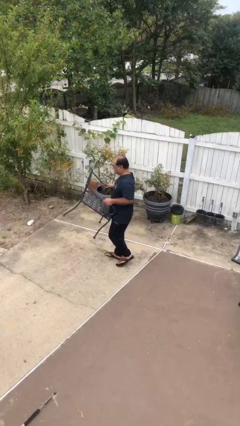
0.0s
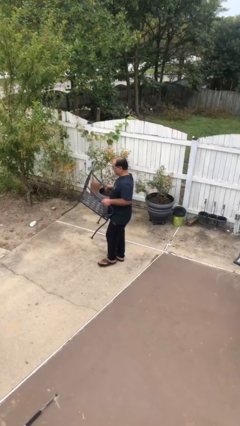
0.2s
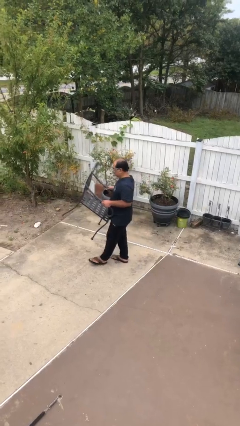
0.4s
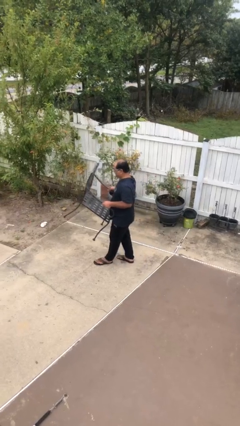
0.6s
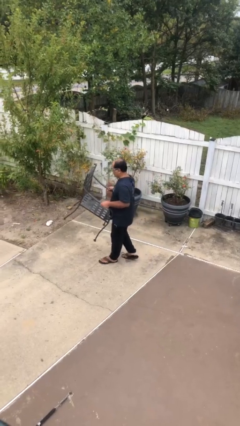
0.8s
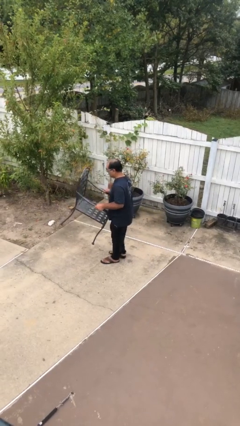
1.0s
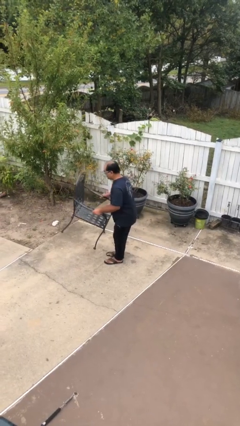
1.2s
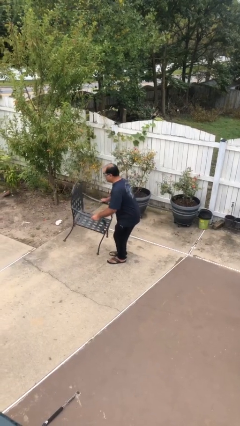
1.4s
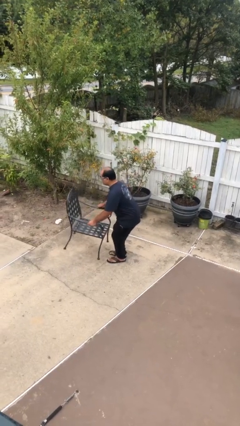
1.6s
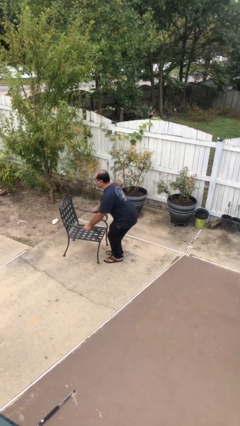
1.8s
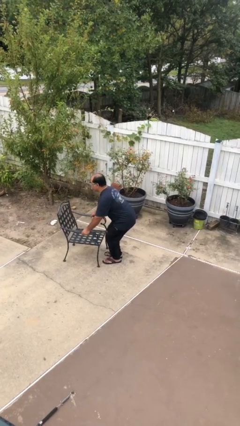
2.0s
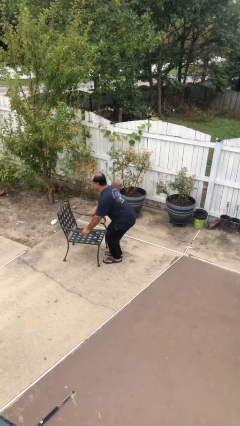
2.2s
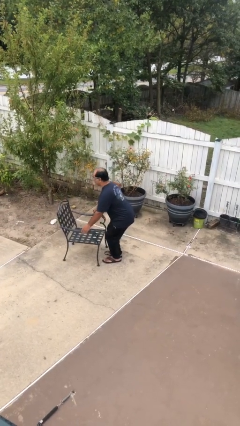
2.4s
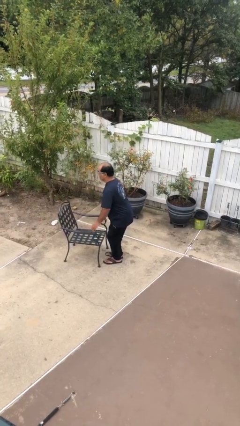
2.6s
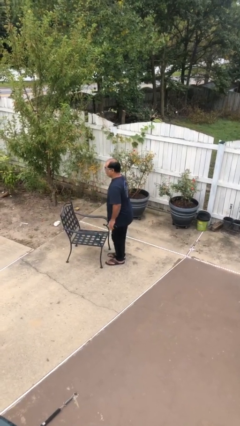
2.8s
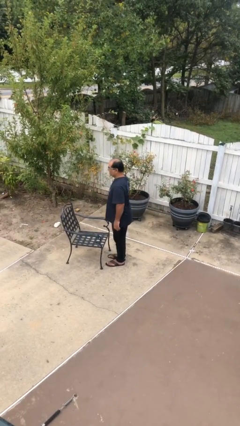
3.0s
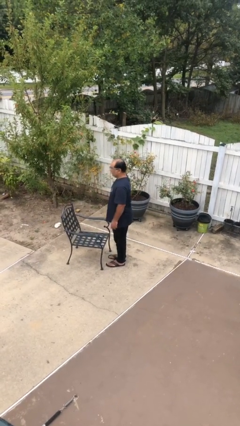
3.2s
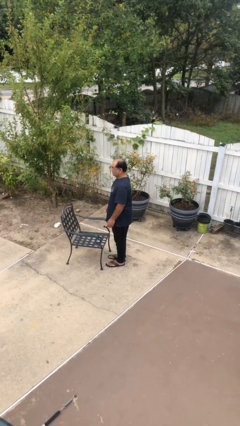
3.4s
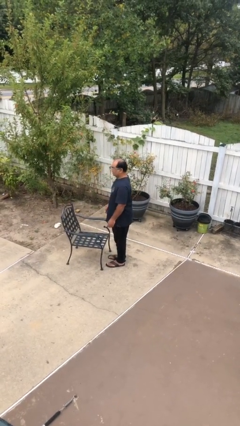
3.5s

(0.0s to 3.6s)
person puts down object on floor

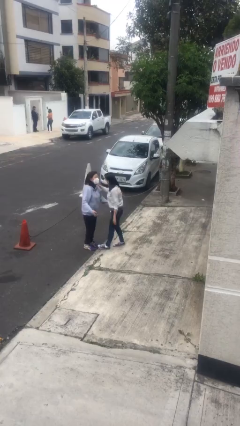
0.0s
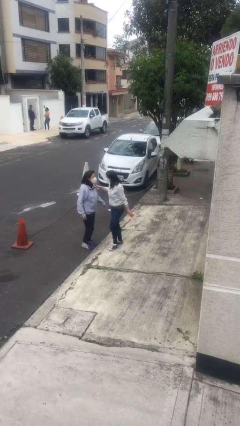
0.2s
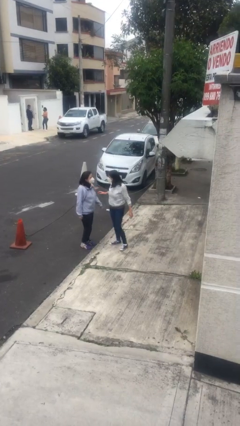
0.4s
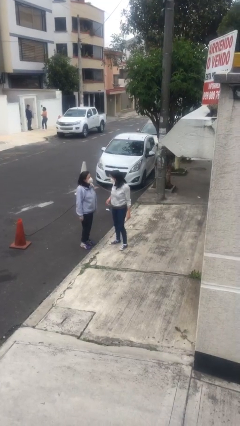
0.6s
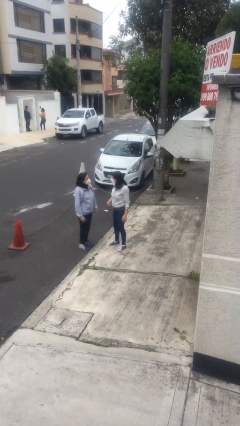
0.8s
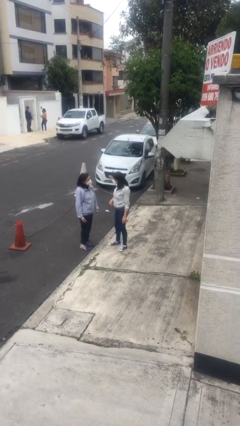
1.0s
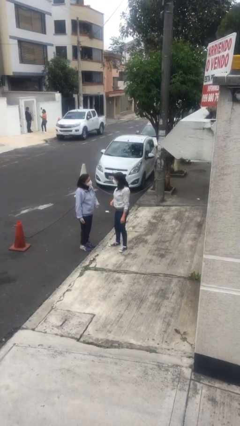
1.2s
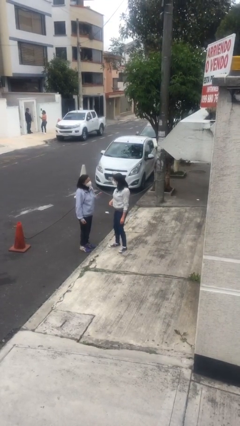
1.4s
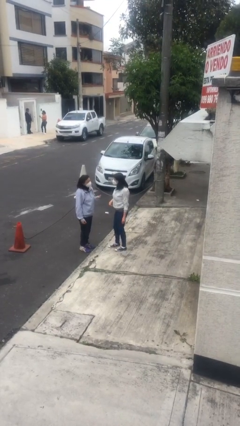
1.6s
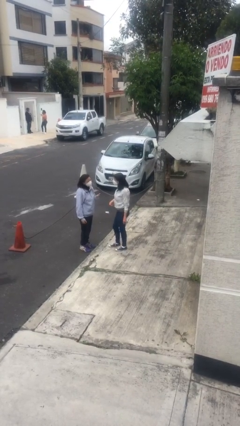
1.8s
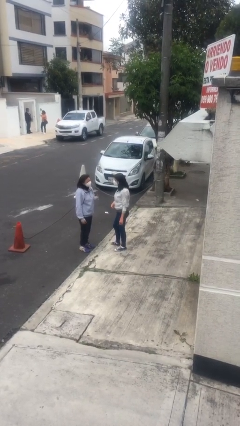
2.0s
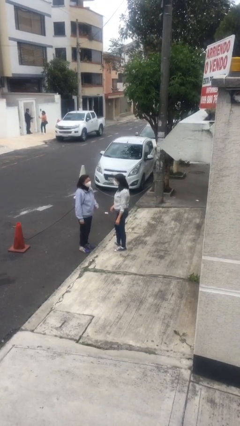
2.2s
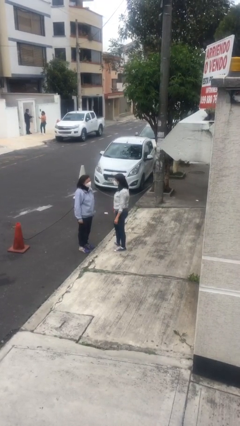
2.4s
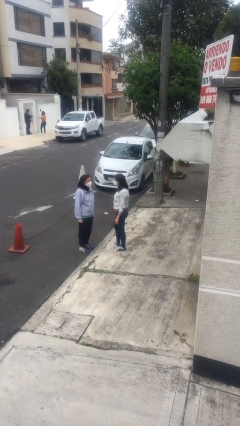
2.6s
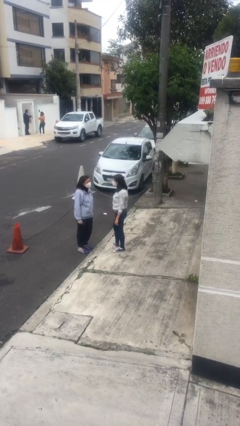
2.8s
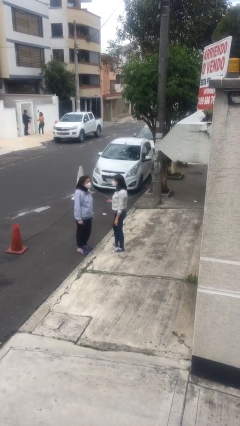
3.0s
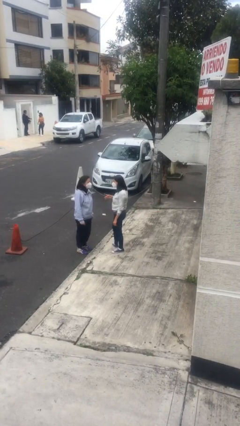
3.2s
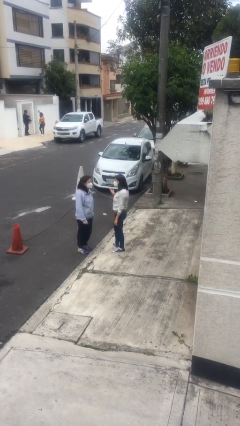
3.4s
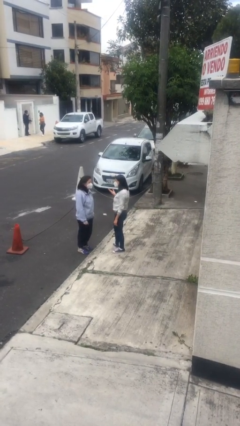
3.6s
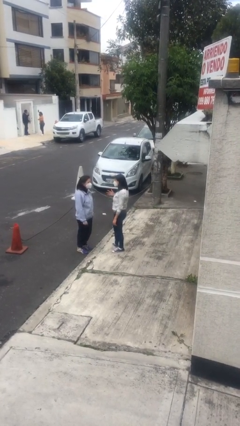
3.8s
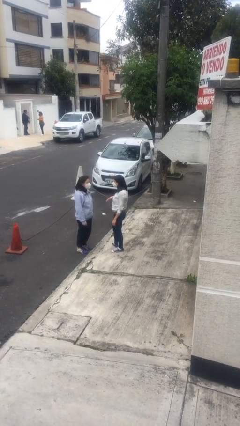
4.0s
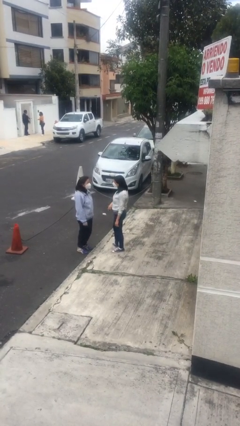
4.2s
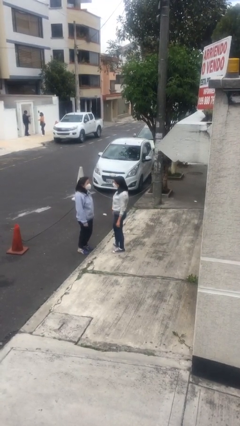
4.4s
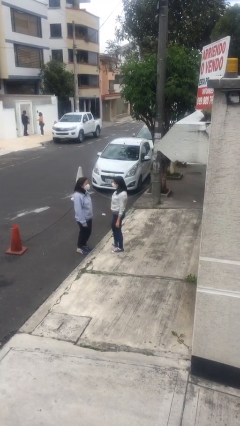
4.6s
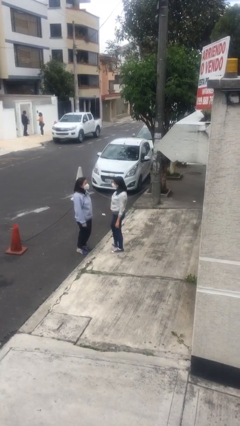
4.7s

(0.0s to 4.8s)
person talks to person

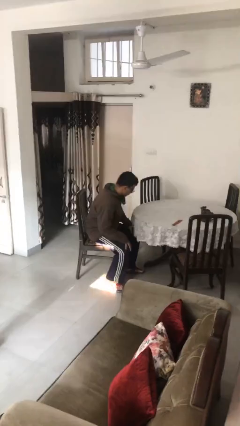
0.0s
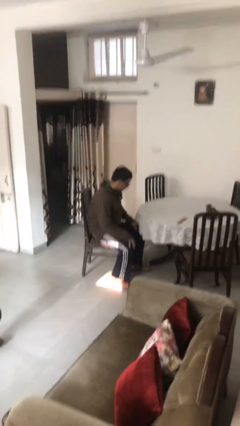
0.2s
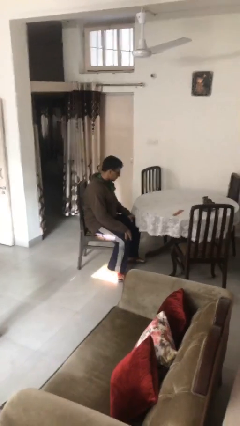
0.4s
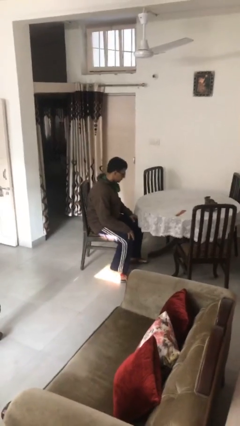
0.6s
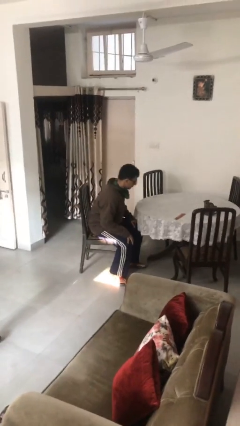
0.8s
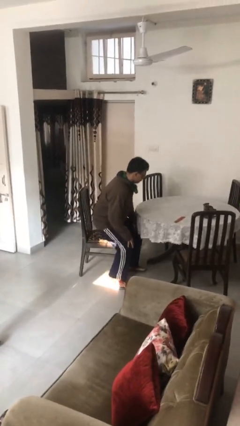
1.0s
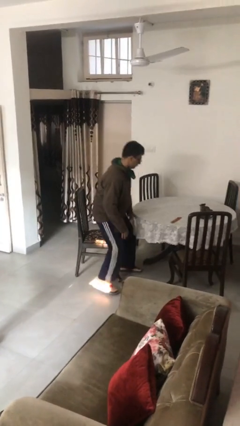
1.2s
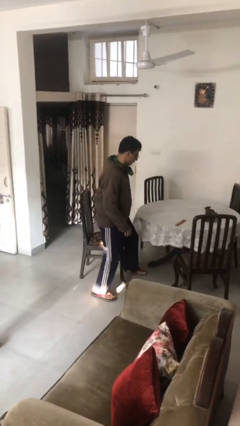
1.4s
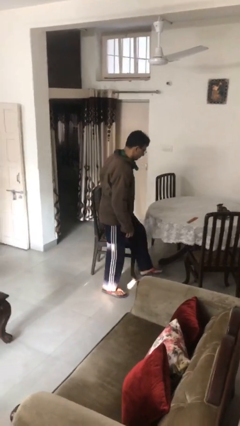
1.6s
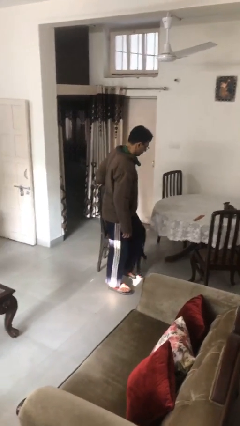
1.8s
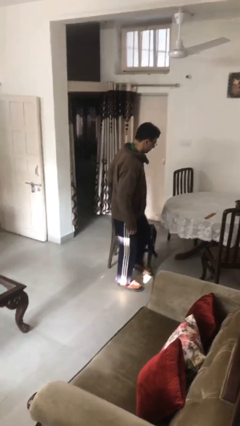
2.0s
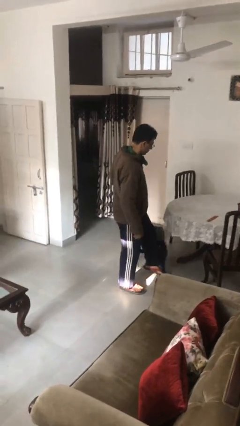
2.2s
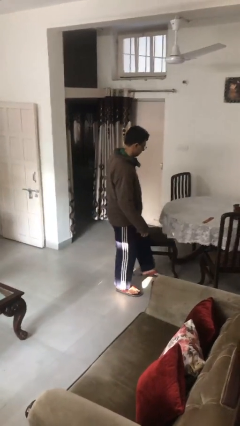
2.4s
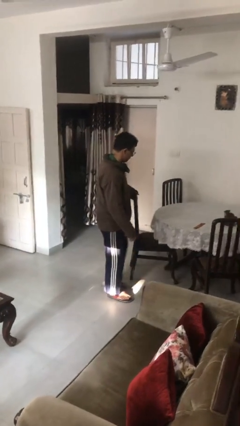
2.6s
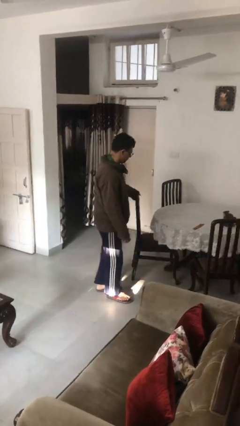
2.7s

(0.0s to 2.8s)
person stands up

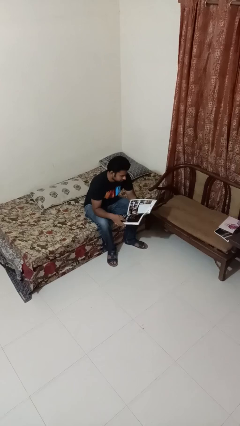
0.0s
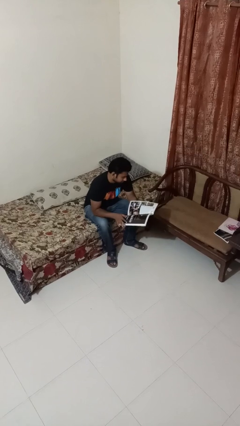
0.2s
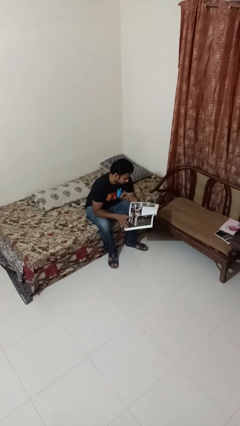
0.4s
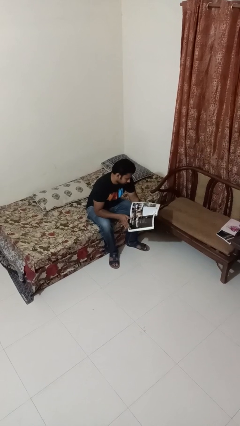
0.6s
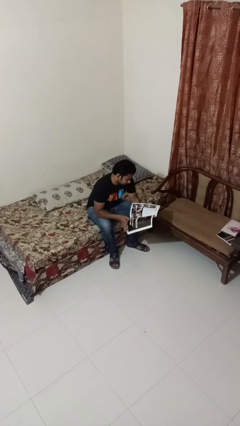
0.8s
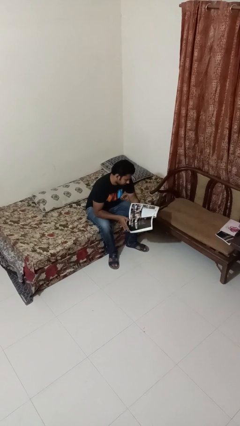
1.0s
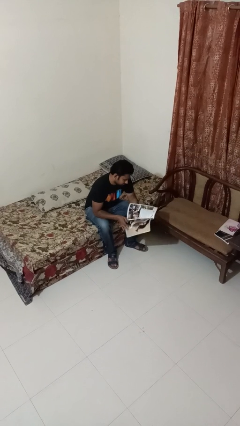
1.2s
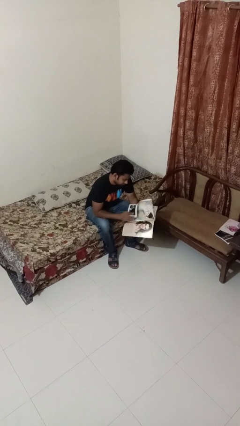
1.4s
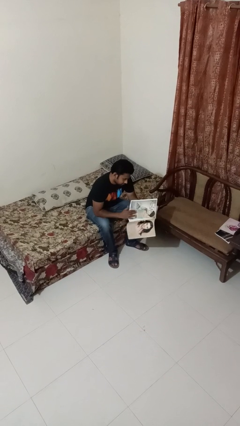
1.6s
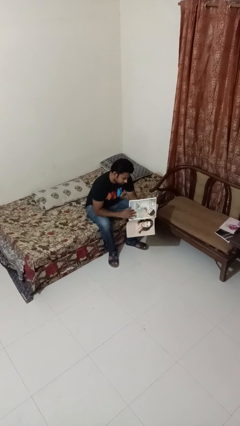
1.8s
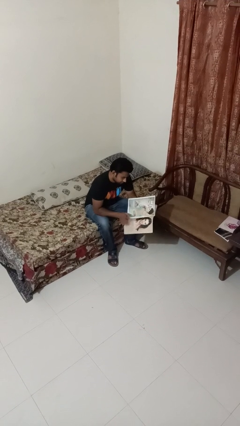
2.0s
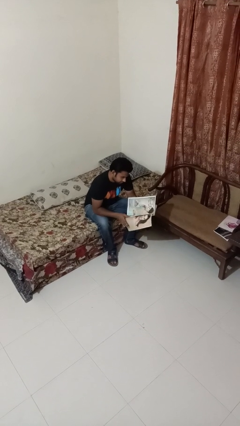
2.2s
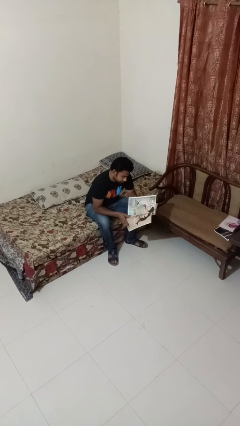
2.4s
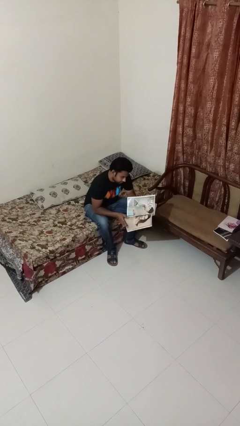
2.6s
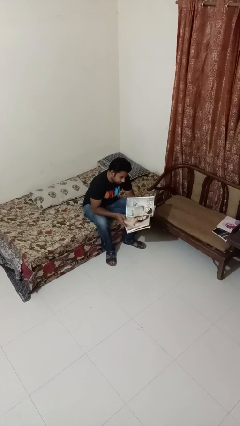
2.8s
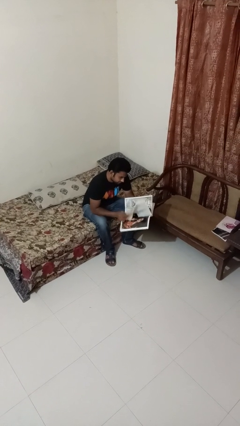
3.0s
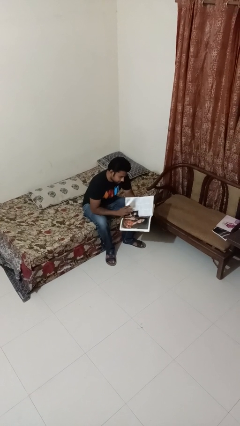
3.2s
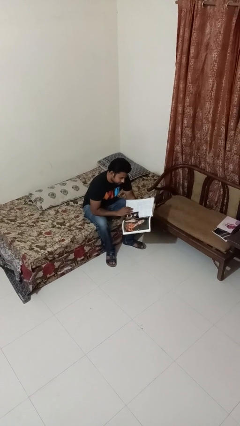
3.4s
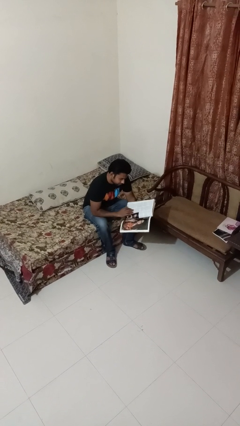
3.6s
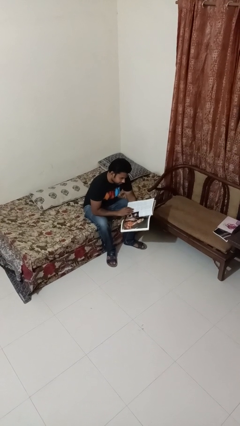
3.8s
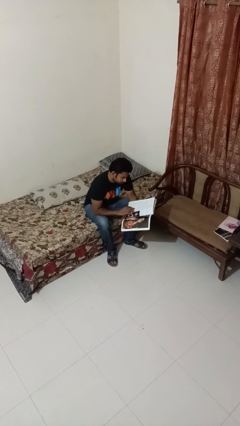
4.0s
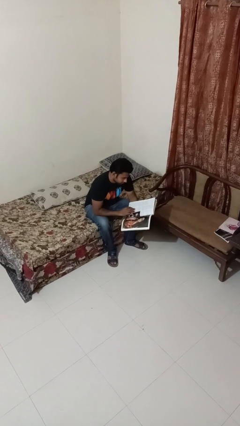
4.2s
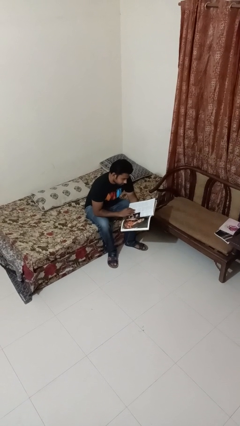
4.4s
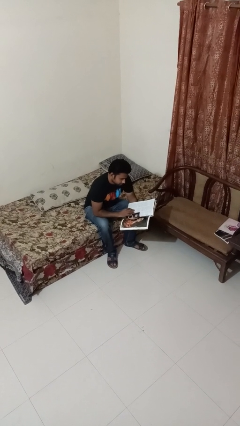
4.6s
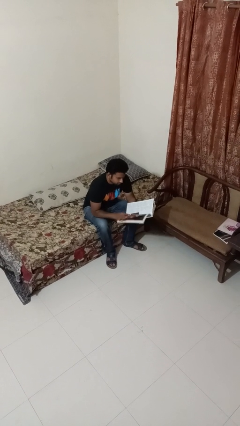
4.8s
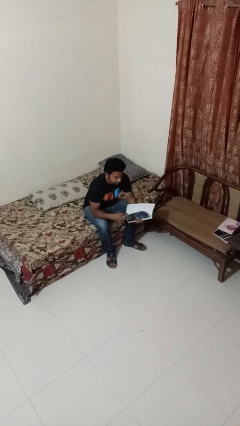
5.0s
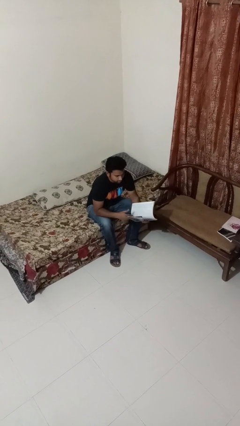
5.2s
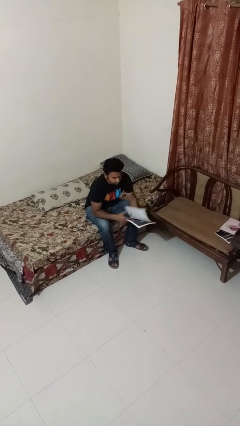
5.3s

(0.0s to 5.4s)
person reads magazine

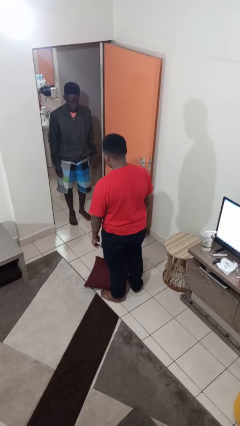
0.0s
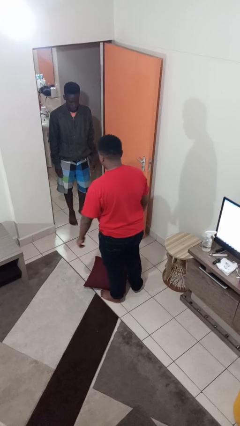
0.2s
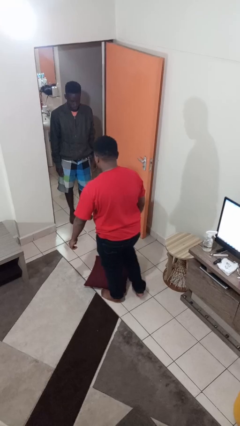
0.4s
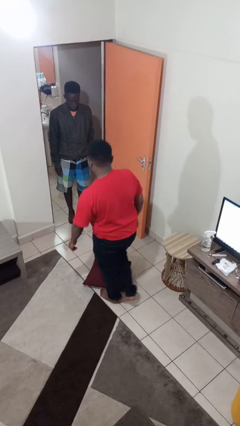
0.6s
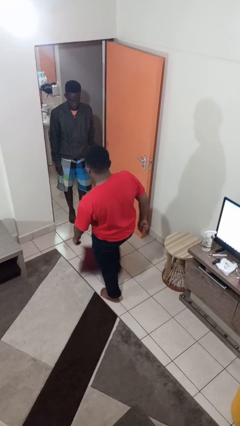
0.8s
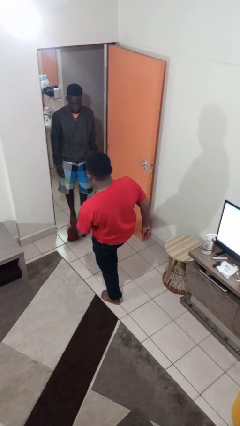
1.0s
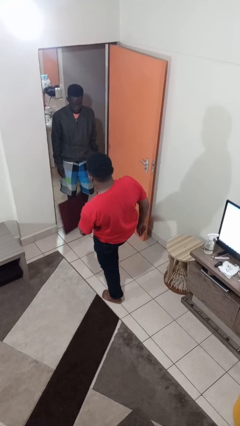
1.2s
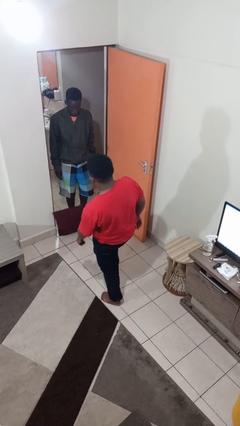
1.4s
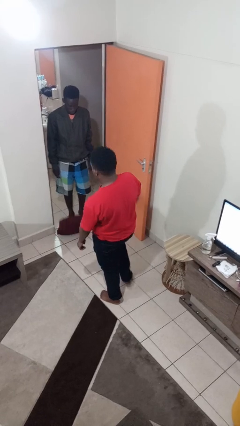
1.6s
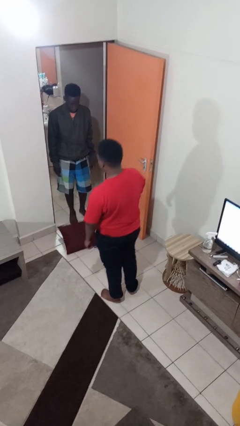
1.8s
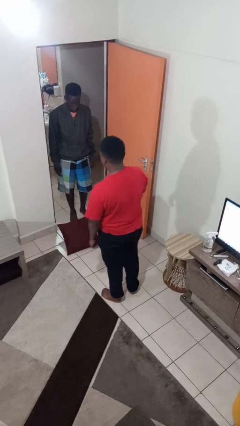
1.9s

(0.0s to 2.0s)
person kicks object to person
